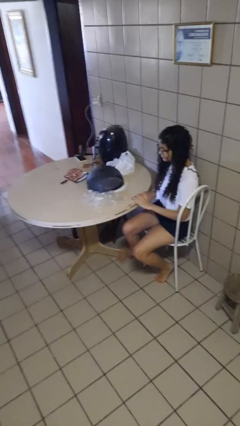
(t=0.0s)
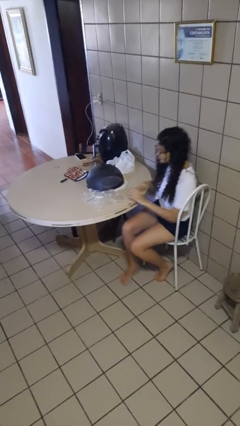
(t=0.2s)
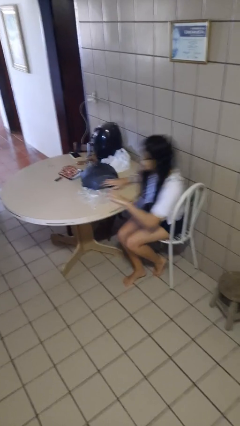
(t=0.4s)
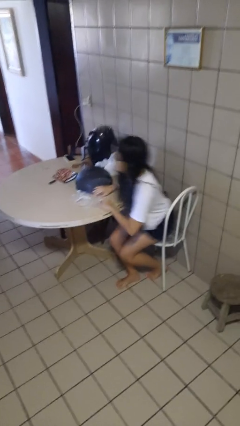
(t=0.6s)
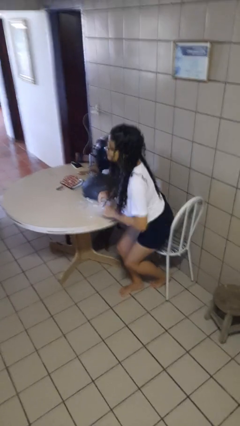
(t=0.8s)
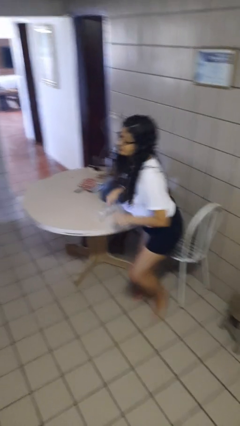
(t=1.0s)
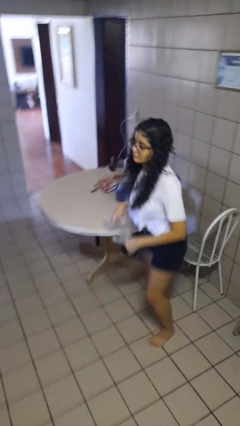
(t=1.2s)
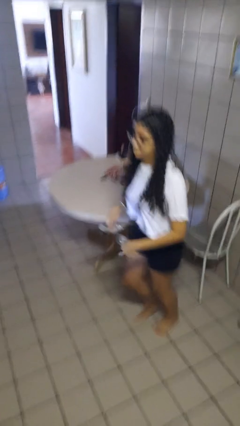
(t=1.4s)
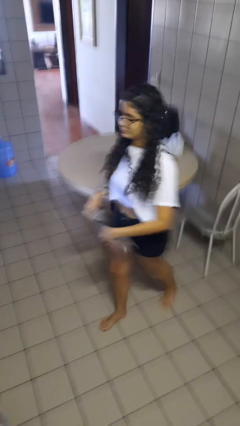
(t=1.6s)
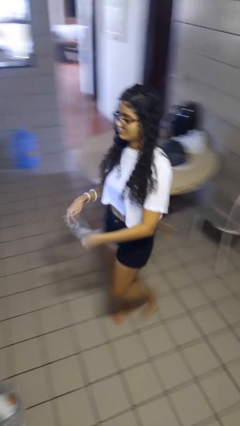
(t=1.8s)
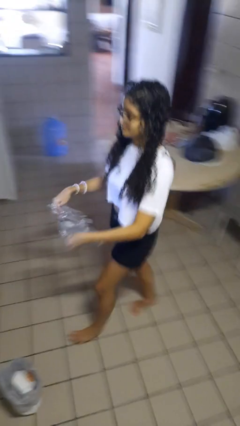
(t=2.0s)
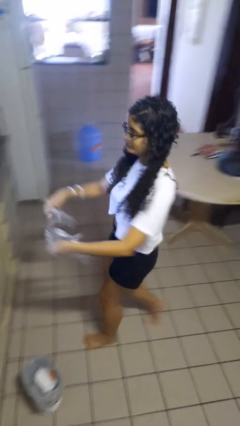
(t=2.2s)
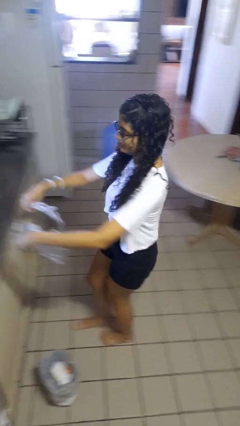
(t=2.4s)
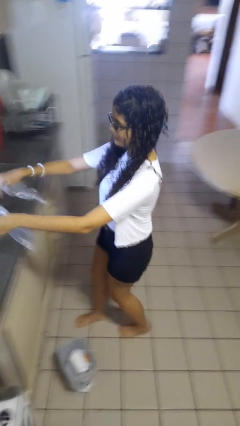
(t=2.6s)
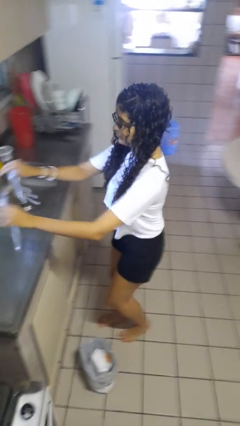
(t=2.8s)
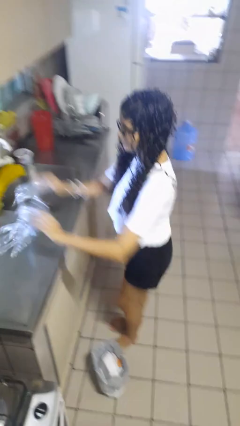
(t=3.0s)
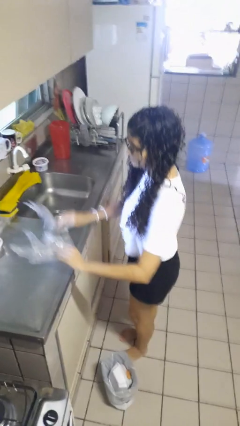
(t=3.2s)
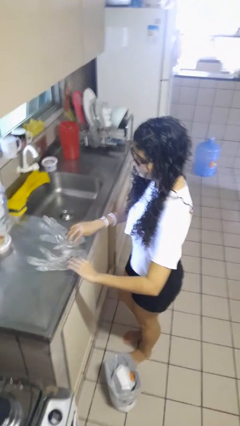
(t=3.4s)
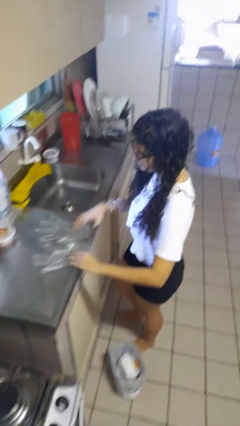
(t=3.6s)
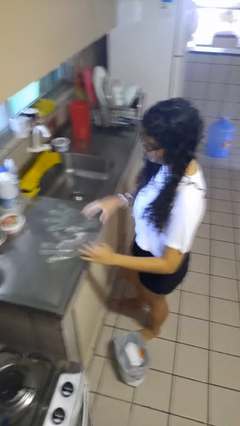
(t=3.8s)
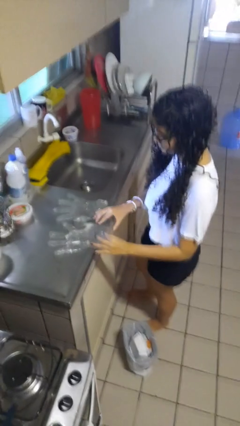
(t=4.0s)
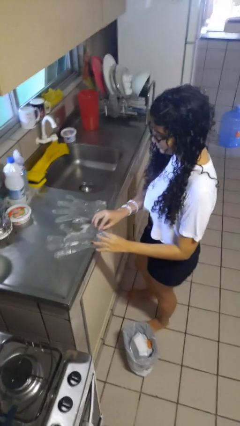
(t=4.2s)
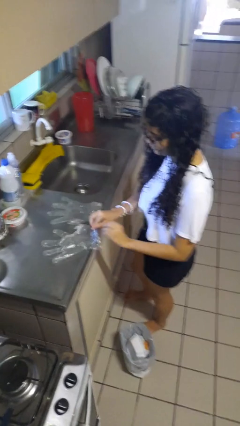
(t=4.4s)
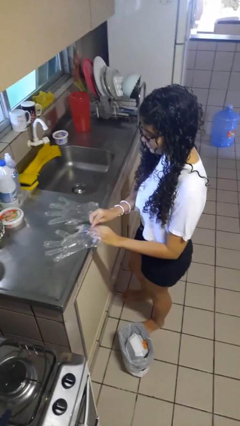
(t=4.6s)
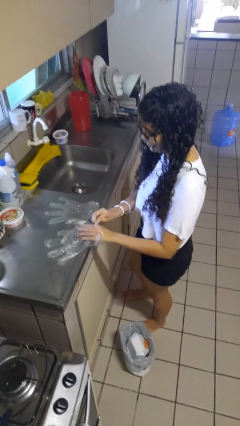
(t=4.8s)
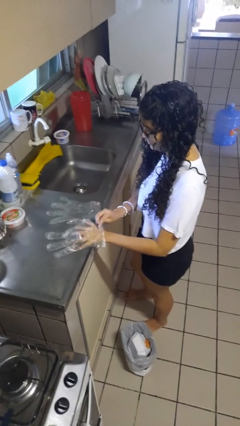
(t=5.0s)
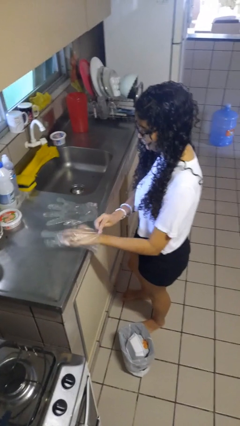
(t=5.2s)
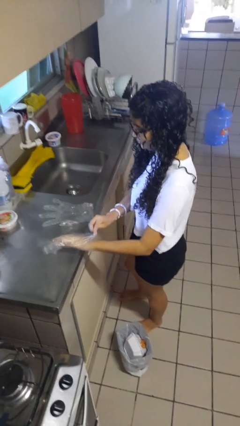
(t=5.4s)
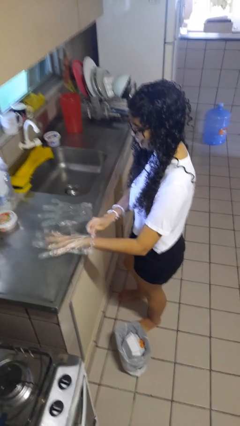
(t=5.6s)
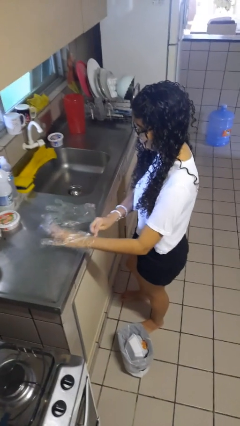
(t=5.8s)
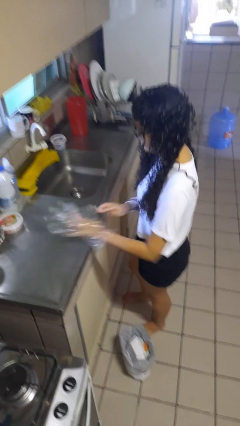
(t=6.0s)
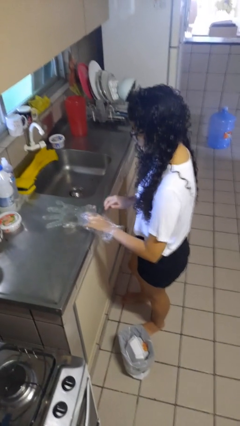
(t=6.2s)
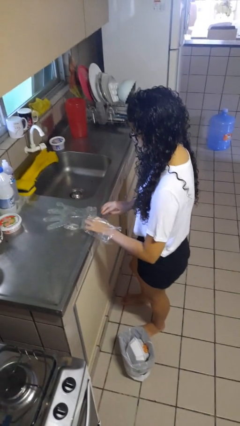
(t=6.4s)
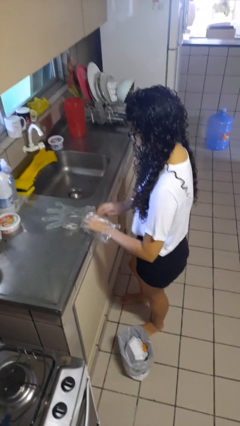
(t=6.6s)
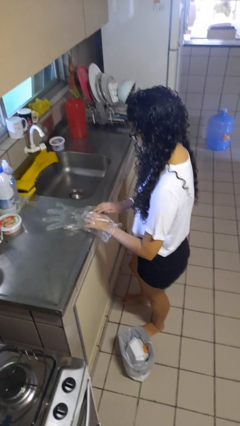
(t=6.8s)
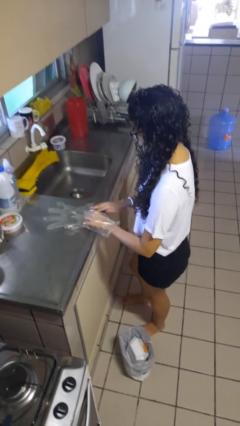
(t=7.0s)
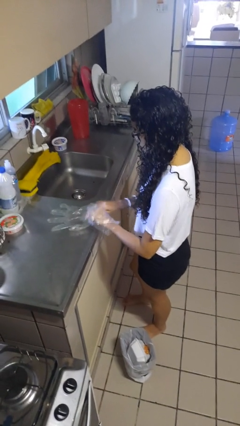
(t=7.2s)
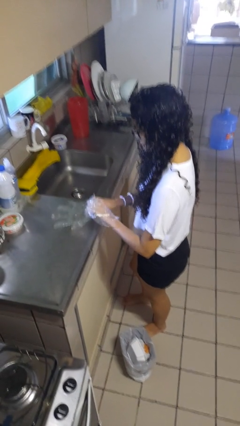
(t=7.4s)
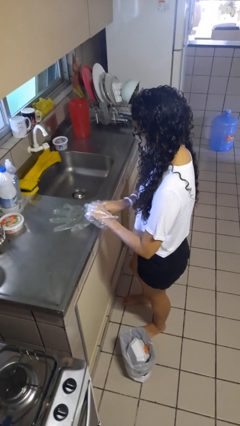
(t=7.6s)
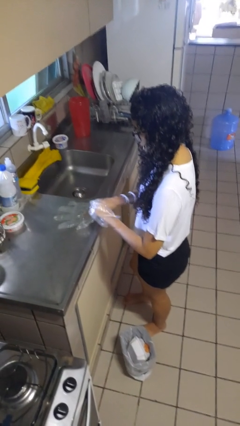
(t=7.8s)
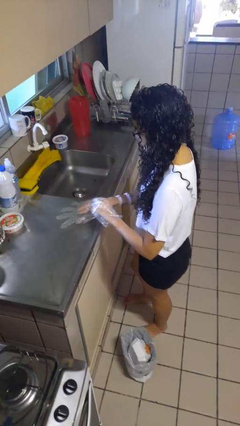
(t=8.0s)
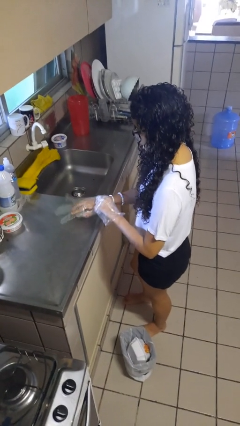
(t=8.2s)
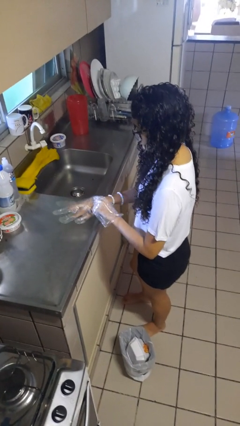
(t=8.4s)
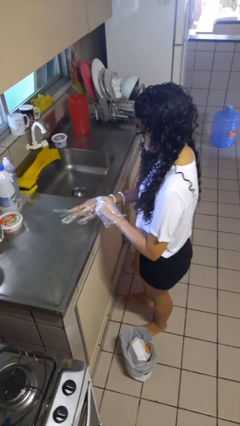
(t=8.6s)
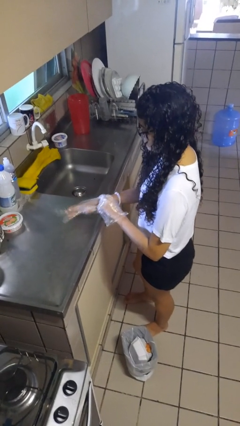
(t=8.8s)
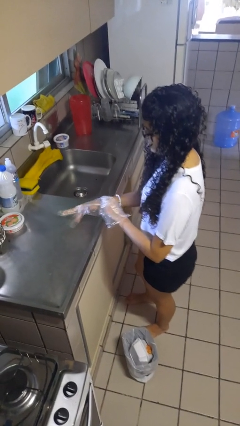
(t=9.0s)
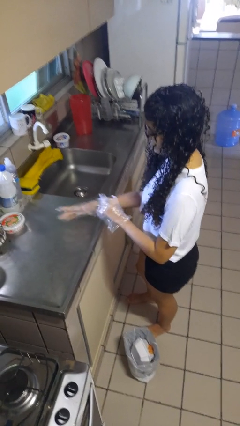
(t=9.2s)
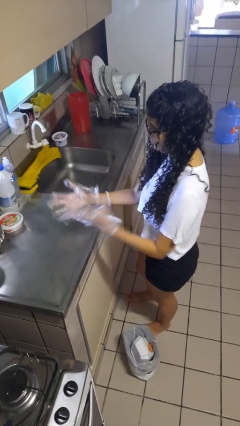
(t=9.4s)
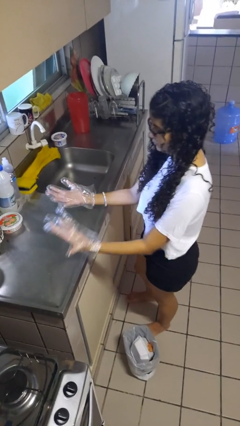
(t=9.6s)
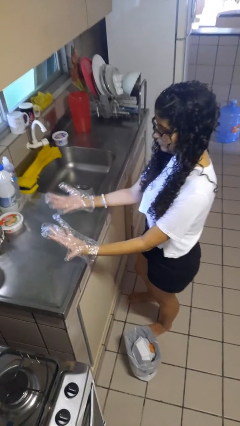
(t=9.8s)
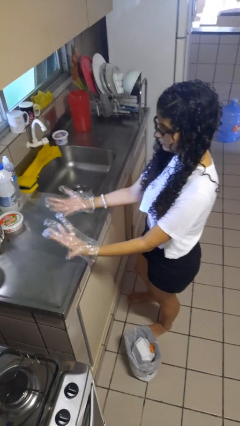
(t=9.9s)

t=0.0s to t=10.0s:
person puts on gloves

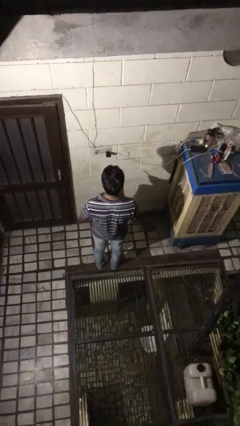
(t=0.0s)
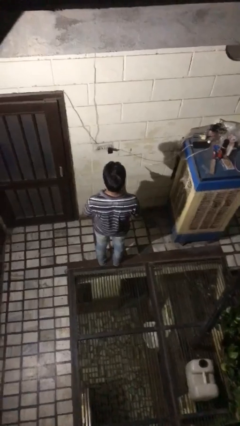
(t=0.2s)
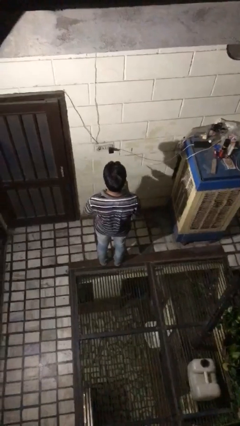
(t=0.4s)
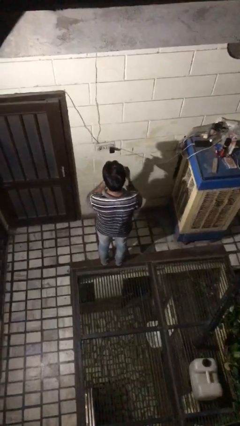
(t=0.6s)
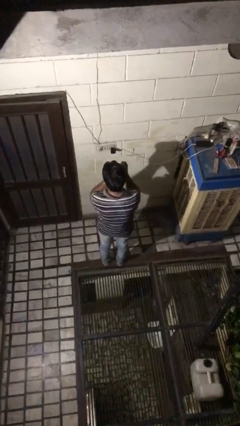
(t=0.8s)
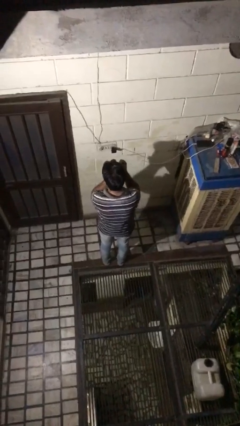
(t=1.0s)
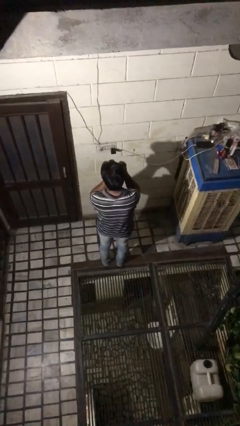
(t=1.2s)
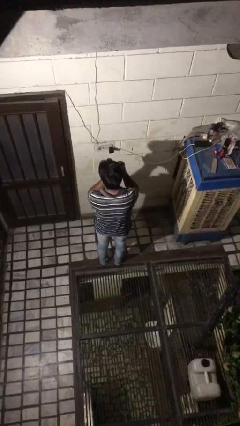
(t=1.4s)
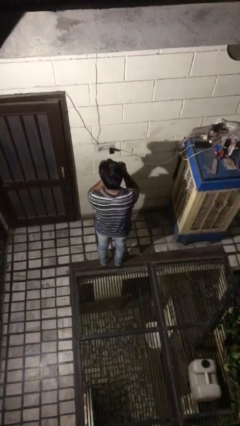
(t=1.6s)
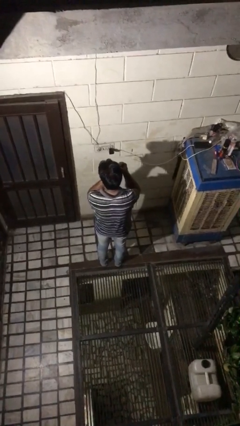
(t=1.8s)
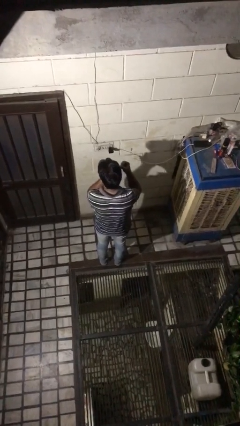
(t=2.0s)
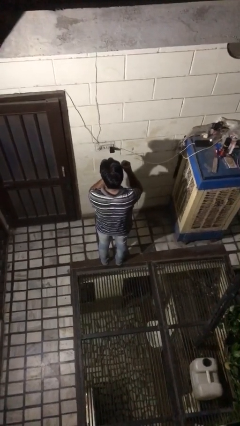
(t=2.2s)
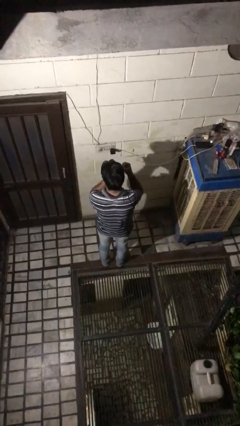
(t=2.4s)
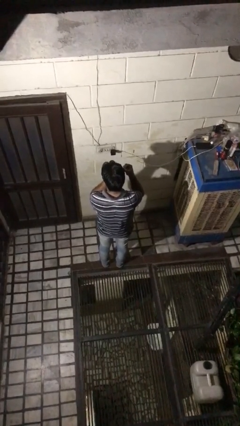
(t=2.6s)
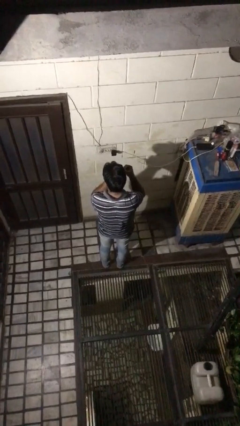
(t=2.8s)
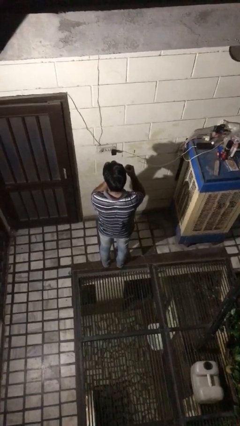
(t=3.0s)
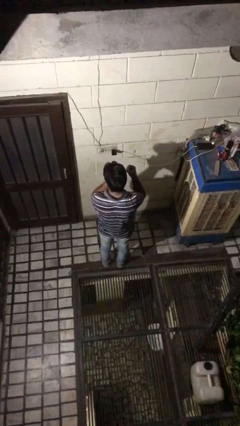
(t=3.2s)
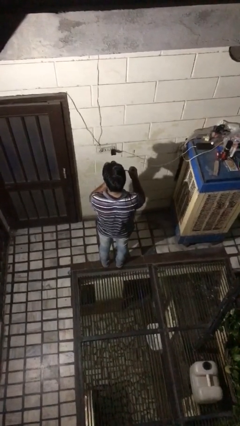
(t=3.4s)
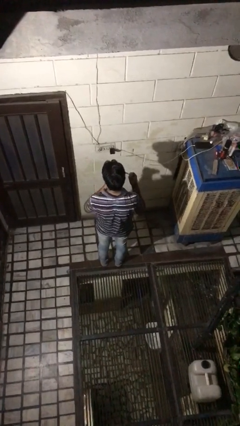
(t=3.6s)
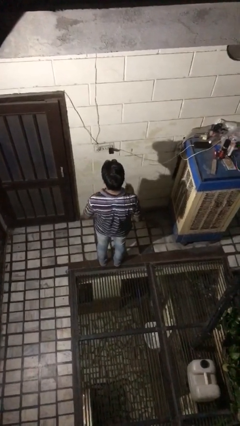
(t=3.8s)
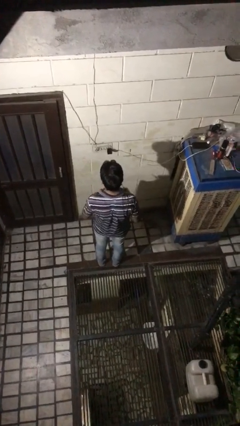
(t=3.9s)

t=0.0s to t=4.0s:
person applies eye makeup

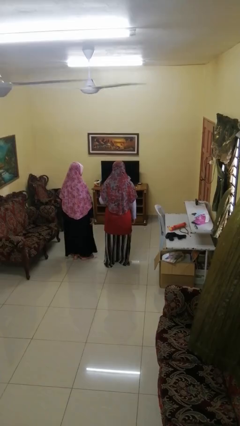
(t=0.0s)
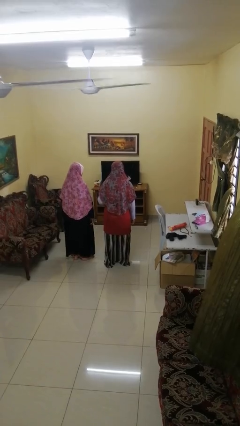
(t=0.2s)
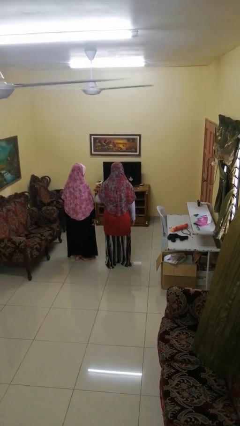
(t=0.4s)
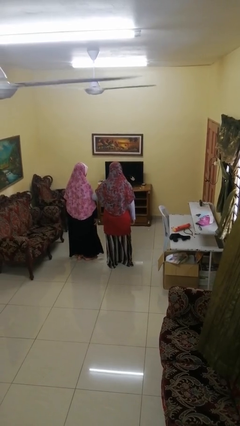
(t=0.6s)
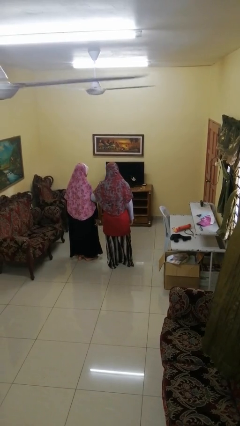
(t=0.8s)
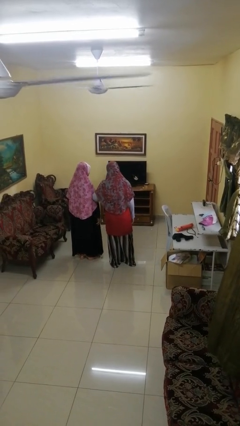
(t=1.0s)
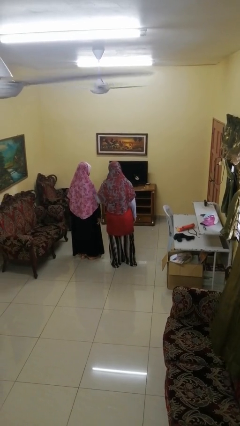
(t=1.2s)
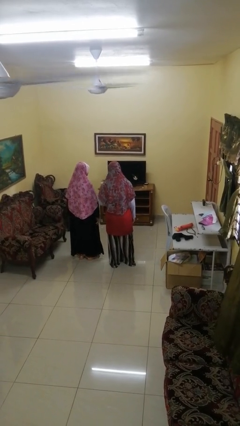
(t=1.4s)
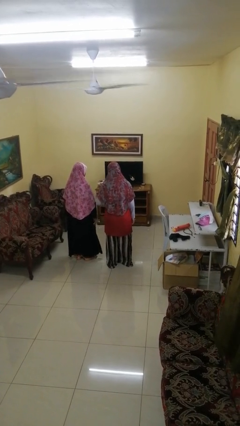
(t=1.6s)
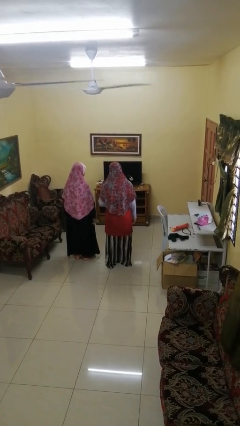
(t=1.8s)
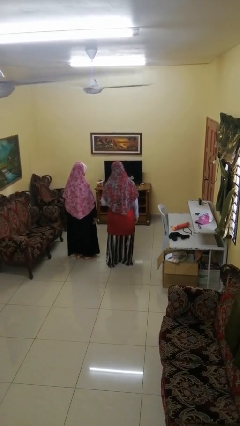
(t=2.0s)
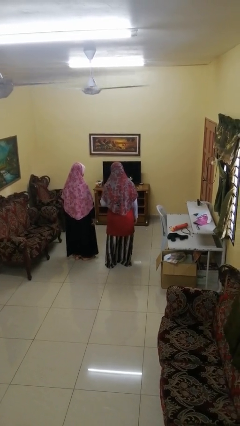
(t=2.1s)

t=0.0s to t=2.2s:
person nudges person with elbow

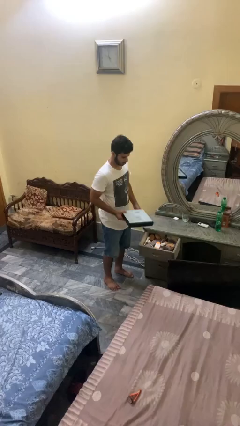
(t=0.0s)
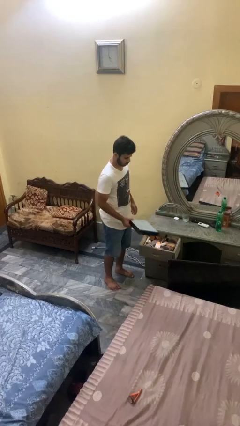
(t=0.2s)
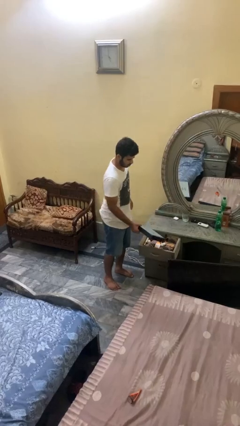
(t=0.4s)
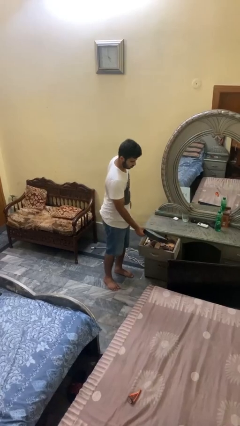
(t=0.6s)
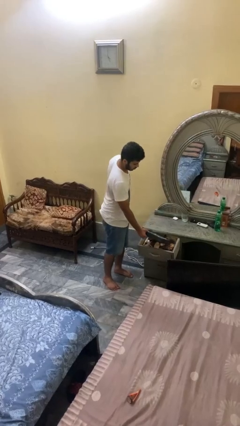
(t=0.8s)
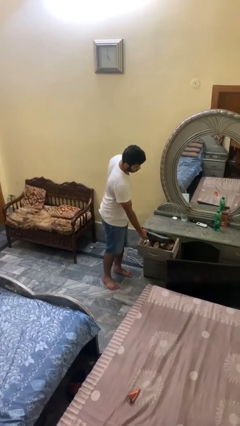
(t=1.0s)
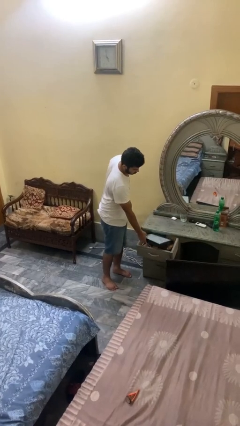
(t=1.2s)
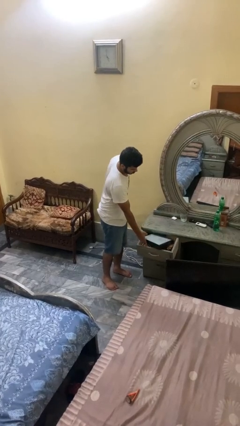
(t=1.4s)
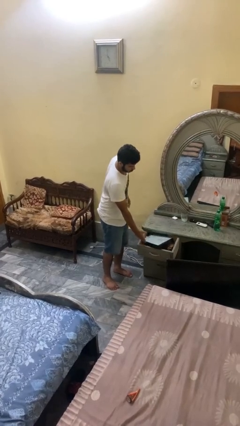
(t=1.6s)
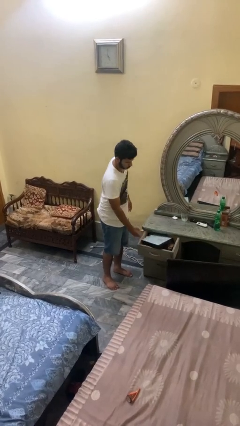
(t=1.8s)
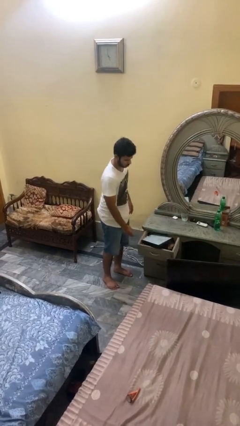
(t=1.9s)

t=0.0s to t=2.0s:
person puts down object into cabinet
